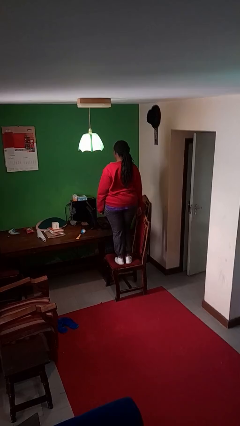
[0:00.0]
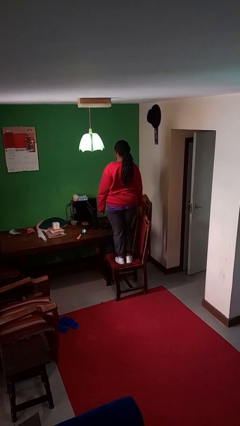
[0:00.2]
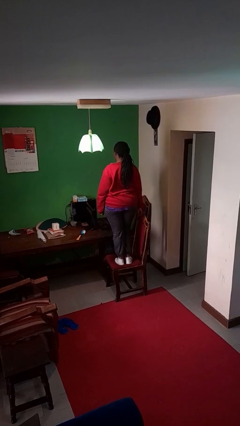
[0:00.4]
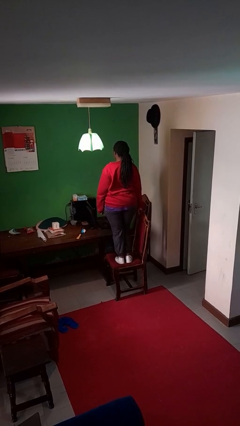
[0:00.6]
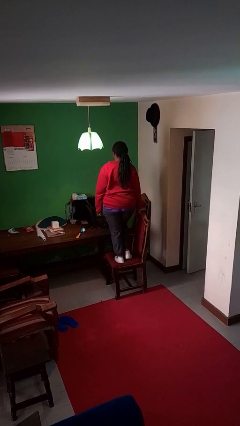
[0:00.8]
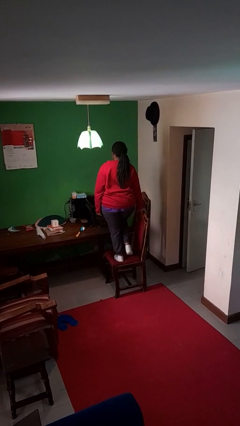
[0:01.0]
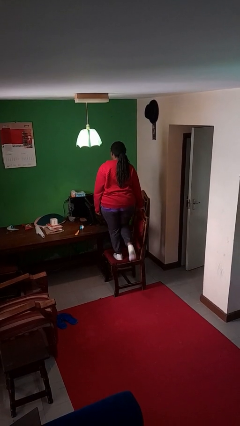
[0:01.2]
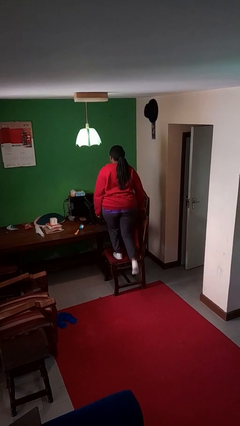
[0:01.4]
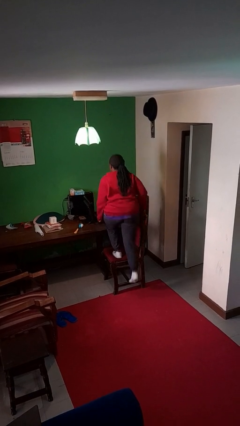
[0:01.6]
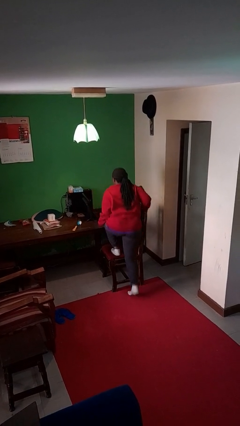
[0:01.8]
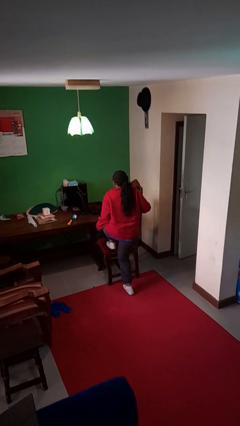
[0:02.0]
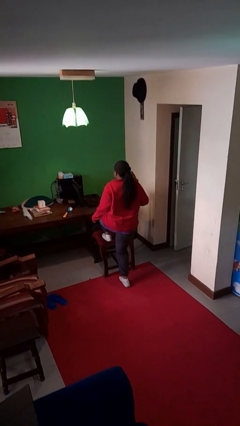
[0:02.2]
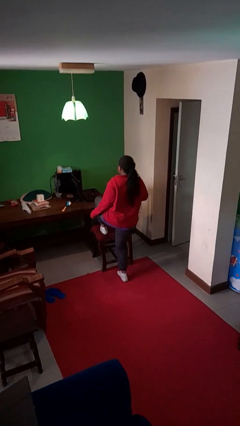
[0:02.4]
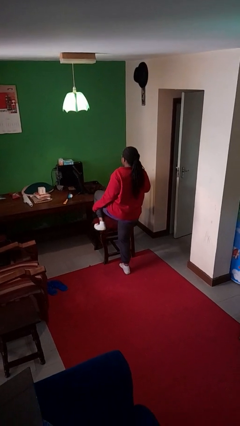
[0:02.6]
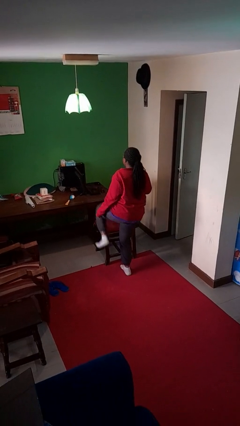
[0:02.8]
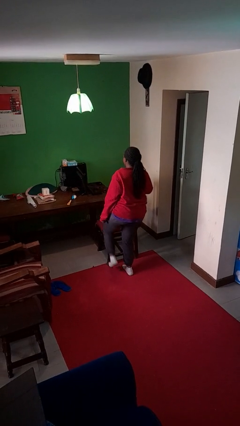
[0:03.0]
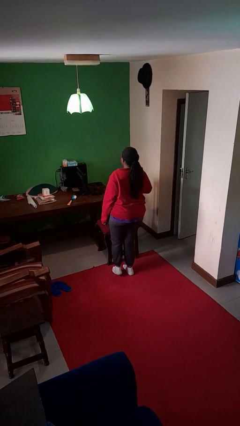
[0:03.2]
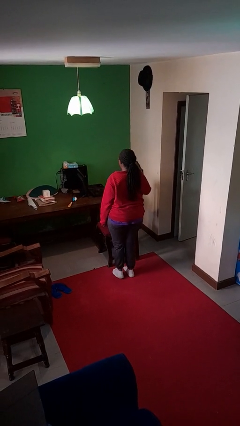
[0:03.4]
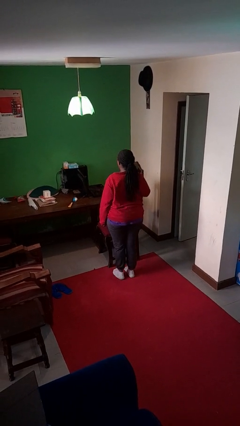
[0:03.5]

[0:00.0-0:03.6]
person climbs off chair

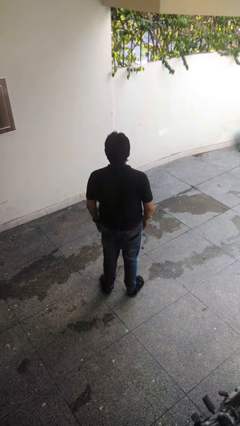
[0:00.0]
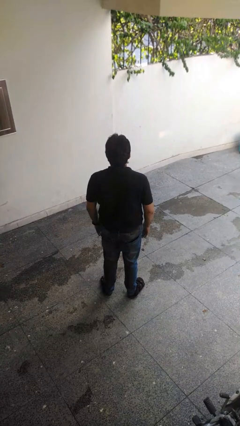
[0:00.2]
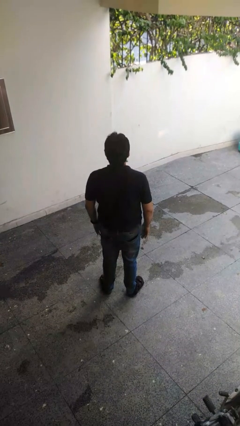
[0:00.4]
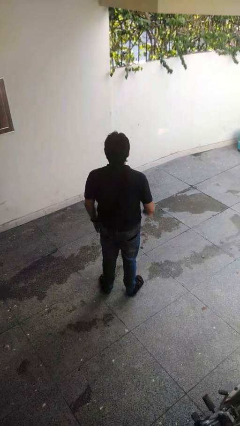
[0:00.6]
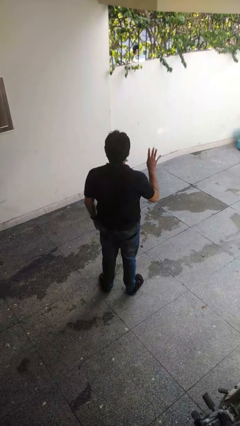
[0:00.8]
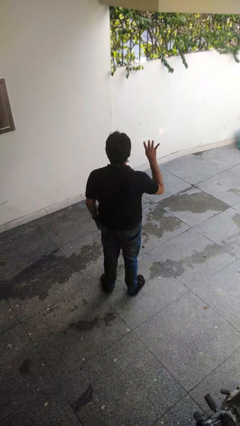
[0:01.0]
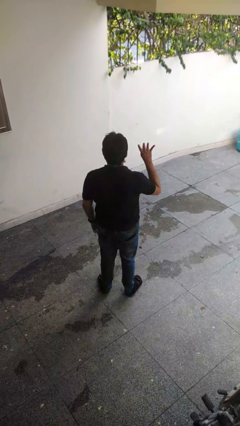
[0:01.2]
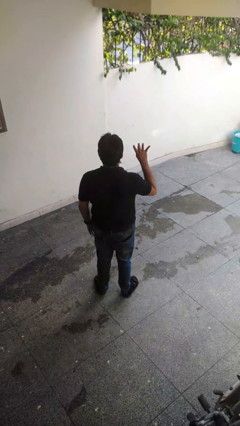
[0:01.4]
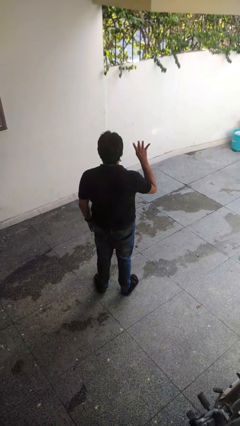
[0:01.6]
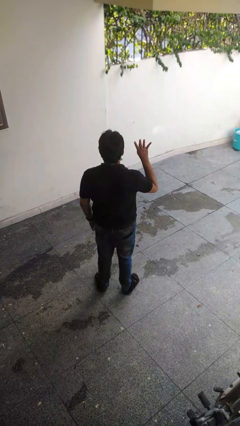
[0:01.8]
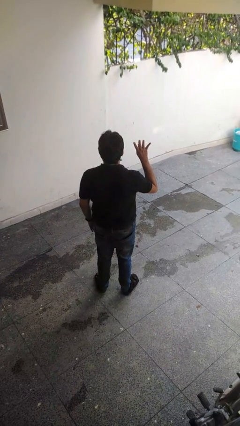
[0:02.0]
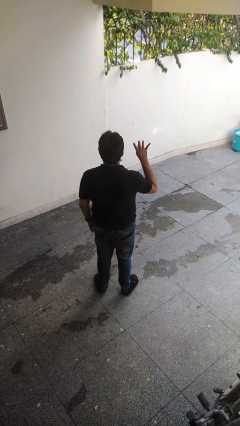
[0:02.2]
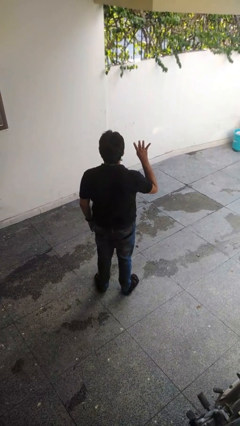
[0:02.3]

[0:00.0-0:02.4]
person gestures number four

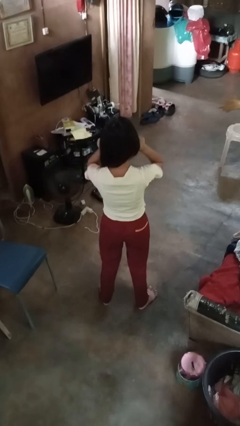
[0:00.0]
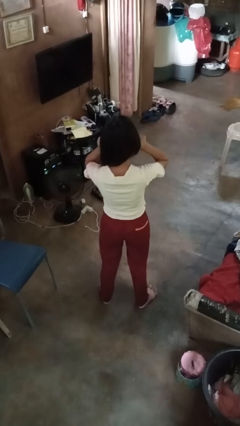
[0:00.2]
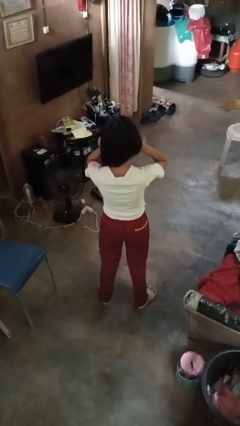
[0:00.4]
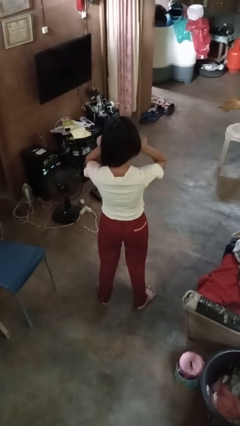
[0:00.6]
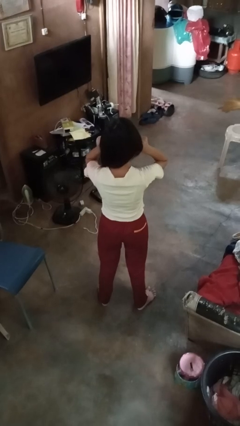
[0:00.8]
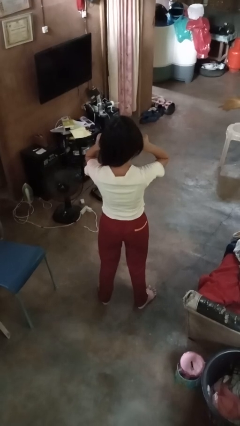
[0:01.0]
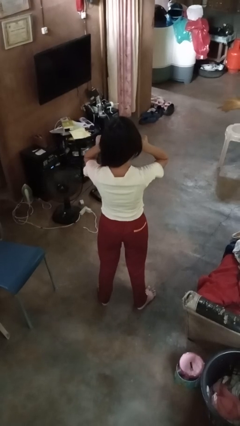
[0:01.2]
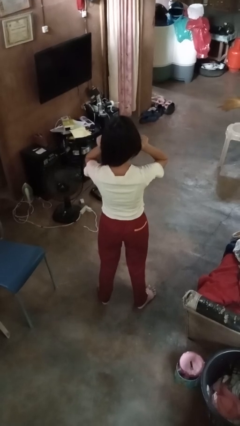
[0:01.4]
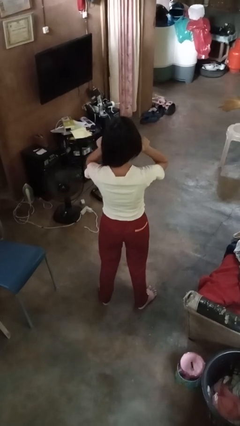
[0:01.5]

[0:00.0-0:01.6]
person touches earlobe

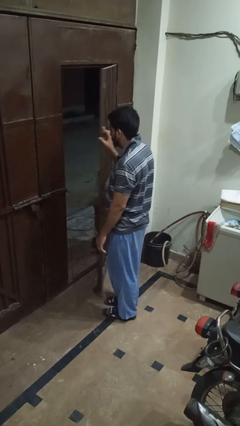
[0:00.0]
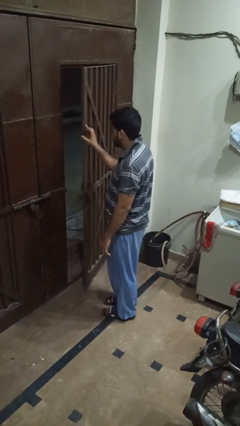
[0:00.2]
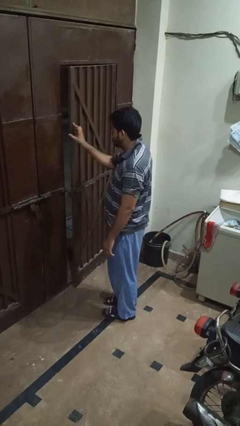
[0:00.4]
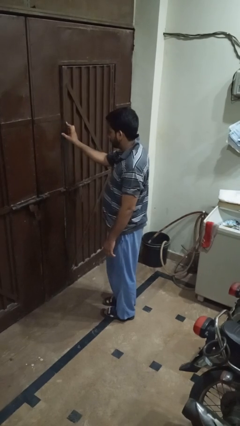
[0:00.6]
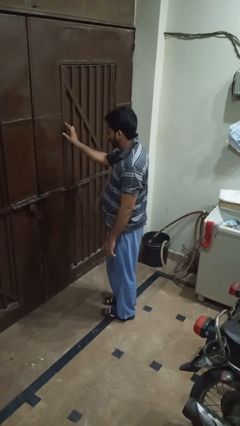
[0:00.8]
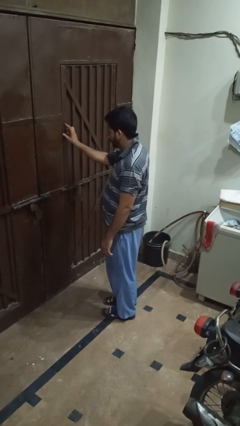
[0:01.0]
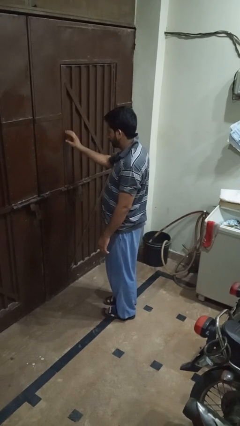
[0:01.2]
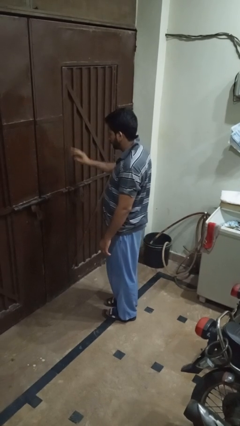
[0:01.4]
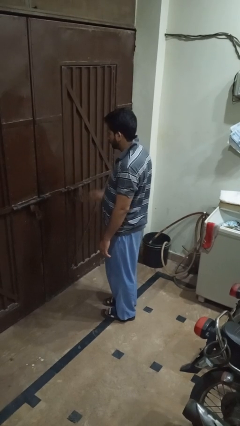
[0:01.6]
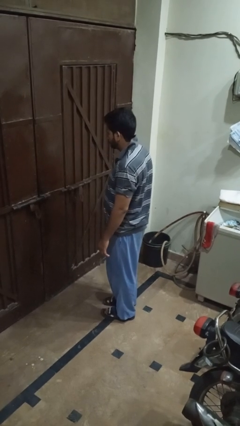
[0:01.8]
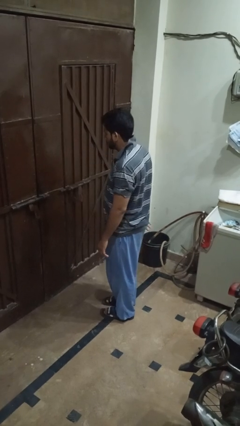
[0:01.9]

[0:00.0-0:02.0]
person closes gate

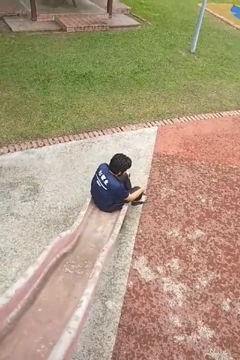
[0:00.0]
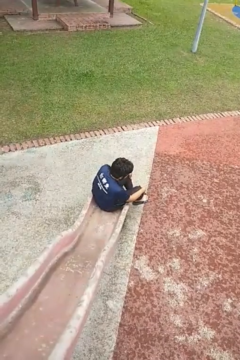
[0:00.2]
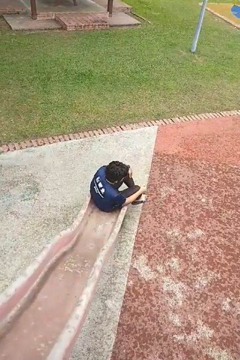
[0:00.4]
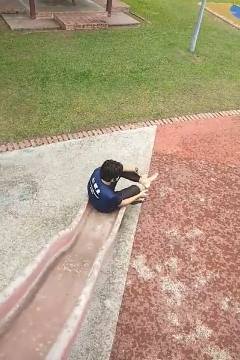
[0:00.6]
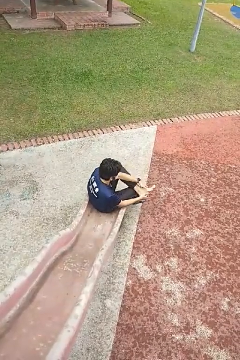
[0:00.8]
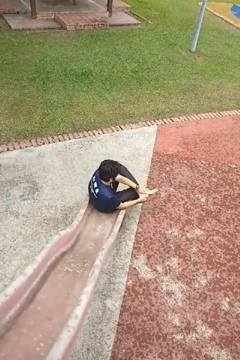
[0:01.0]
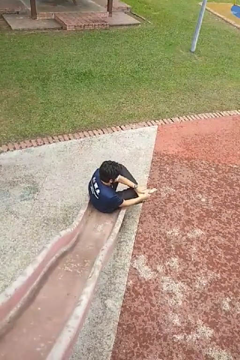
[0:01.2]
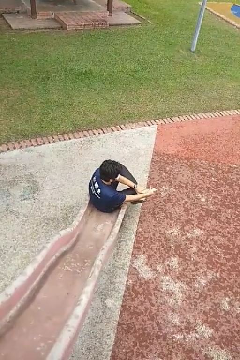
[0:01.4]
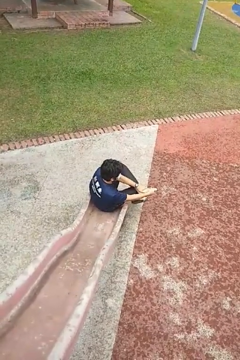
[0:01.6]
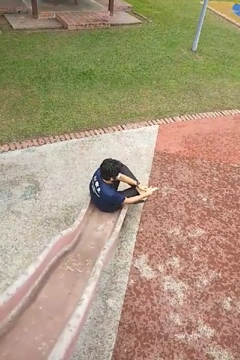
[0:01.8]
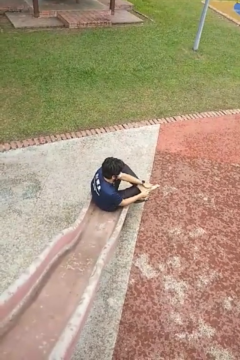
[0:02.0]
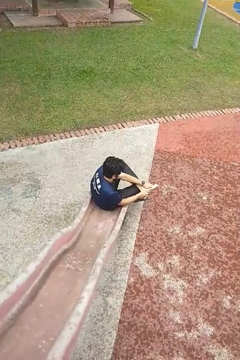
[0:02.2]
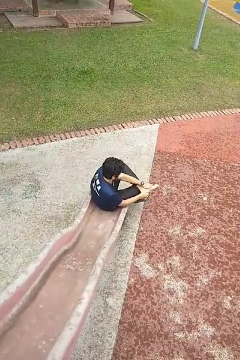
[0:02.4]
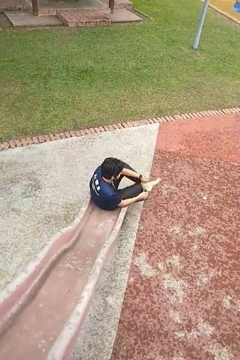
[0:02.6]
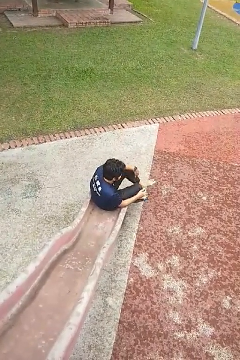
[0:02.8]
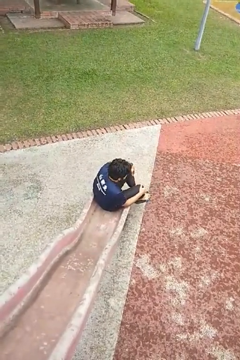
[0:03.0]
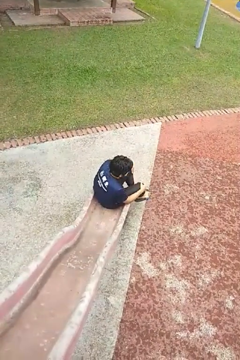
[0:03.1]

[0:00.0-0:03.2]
person rubs foot

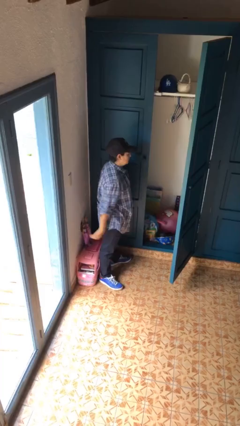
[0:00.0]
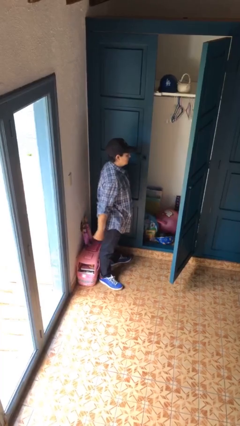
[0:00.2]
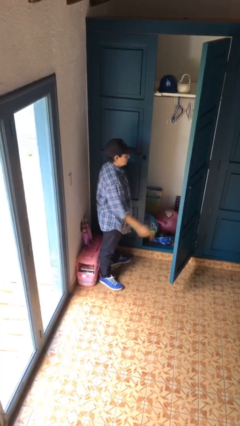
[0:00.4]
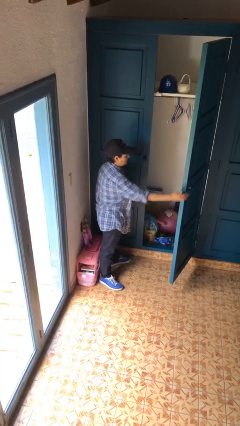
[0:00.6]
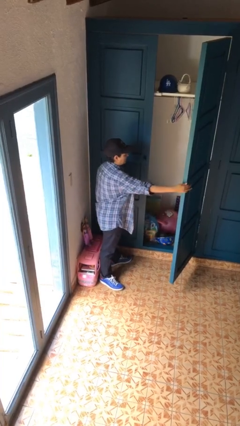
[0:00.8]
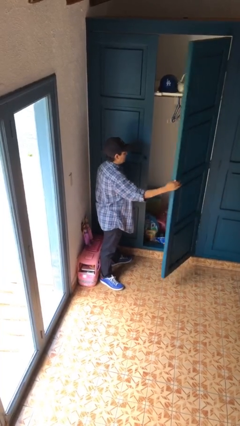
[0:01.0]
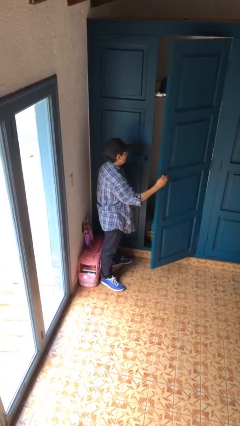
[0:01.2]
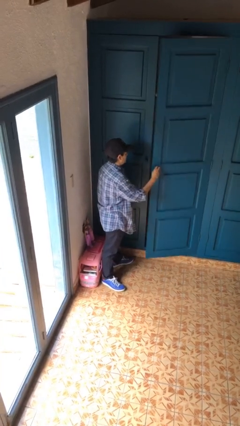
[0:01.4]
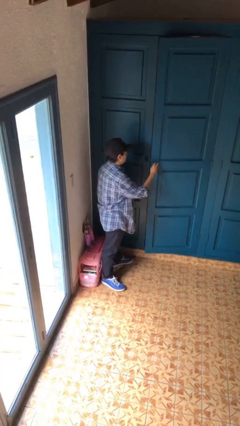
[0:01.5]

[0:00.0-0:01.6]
person closes closet door

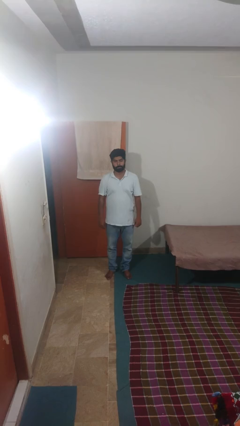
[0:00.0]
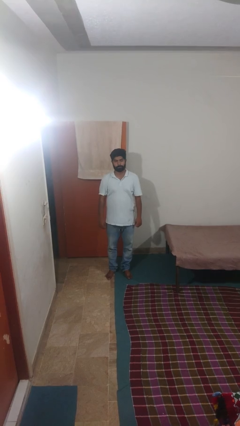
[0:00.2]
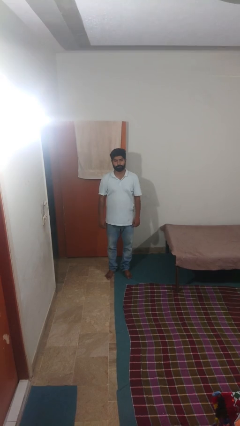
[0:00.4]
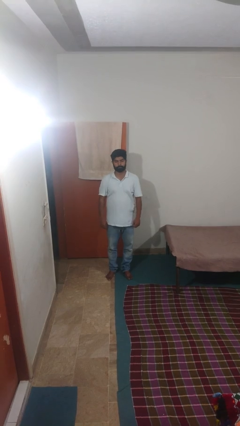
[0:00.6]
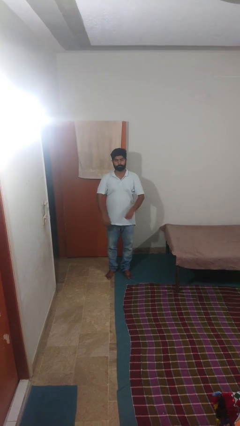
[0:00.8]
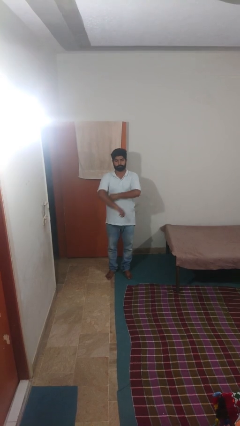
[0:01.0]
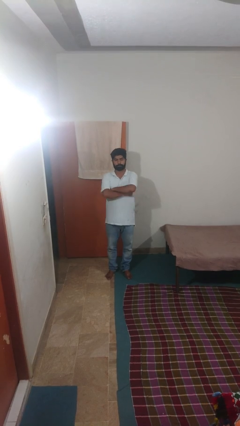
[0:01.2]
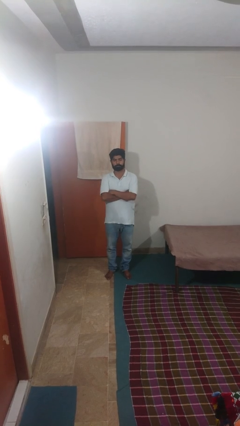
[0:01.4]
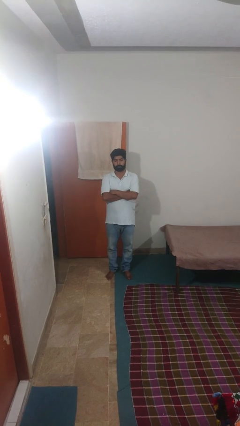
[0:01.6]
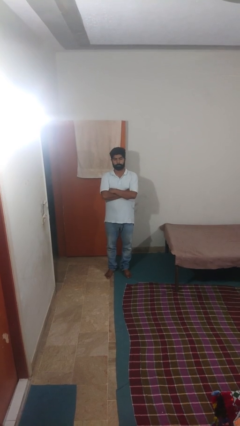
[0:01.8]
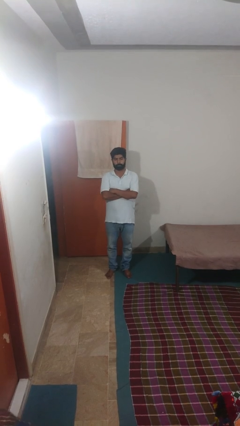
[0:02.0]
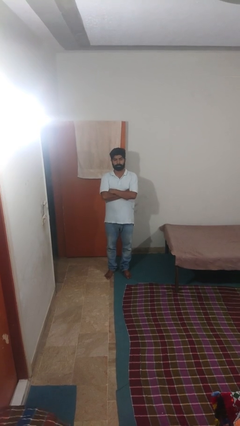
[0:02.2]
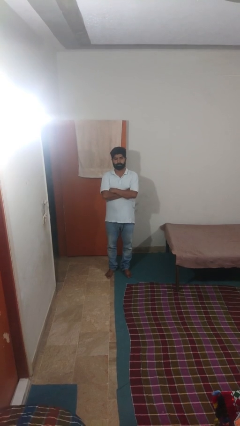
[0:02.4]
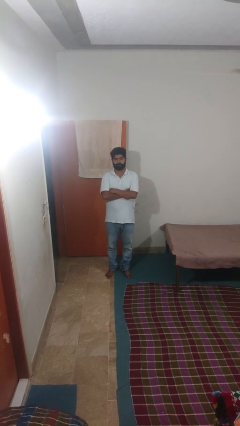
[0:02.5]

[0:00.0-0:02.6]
person crosses arms

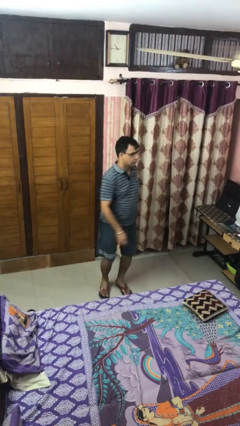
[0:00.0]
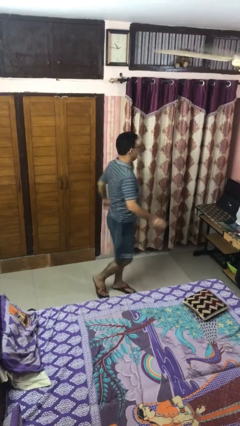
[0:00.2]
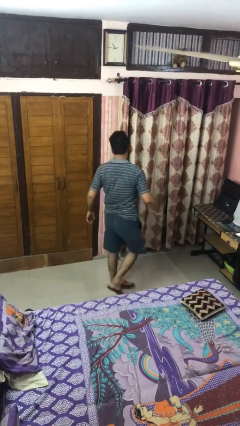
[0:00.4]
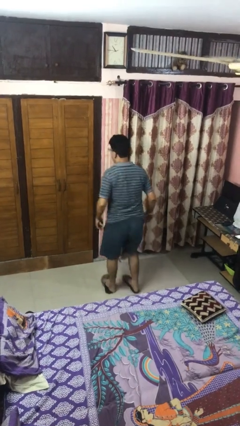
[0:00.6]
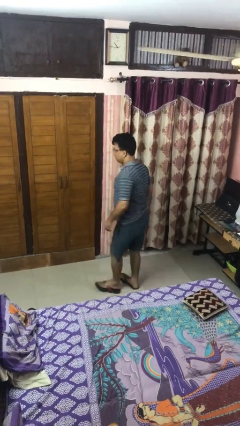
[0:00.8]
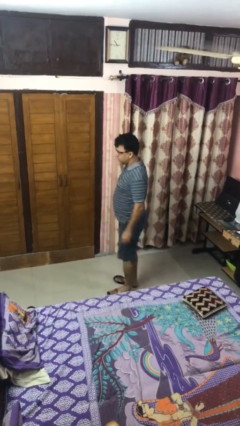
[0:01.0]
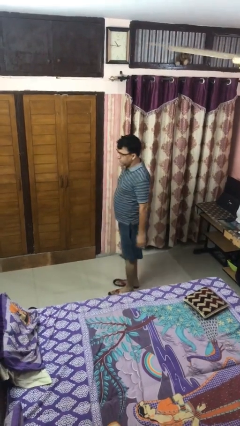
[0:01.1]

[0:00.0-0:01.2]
person twirls
